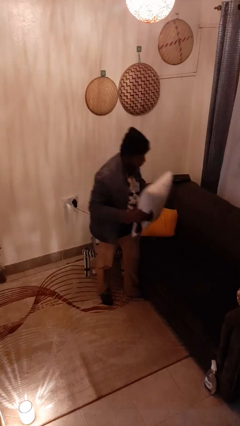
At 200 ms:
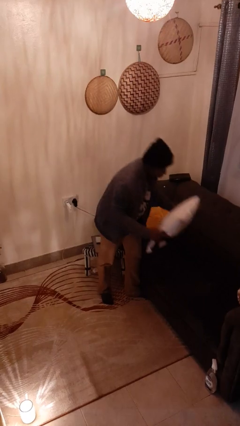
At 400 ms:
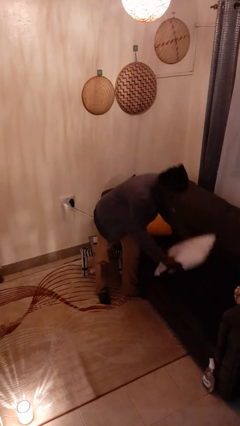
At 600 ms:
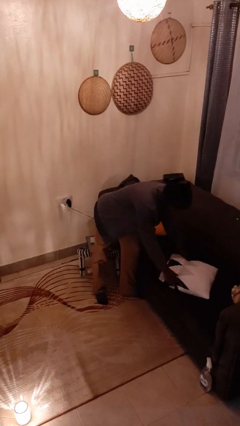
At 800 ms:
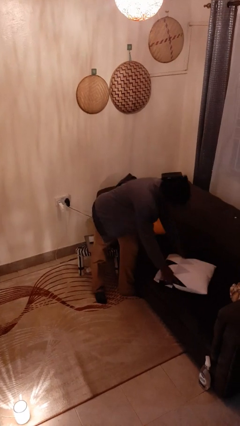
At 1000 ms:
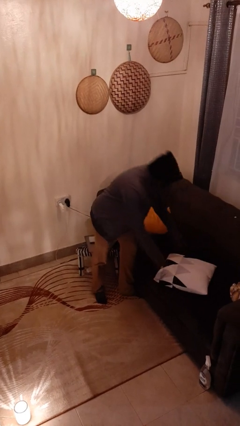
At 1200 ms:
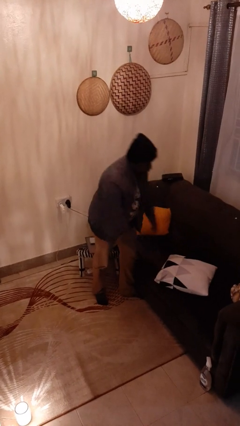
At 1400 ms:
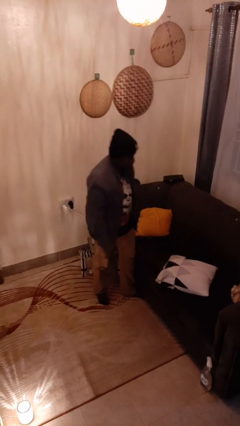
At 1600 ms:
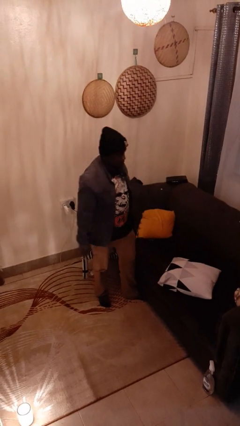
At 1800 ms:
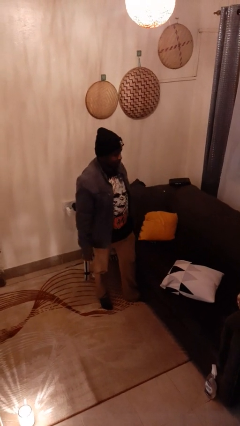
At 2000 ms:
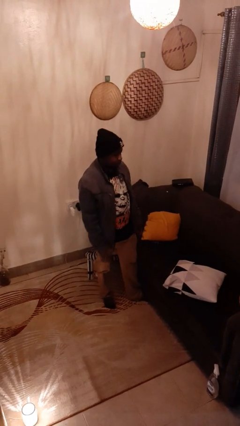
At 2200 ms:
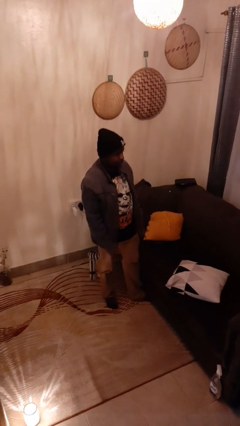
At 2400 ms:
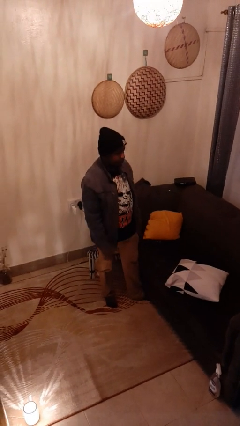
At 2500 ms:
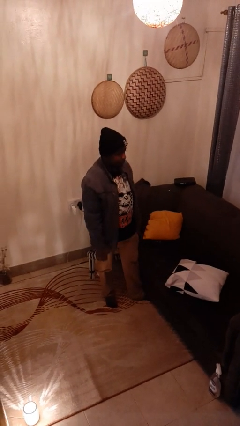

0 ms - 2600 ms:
person puts down object on couch

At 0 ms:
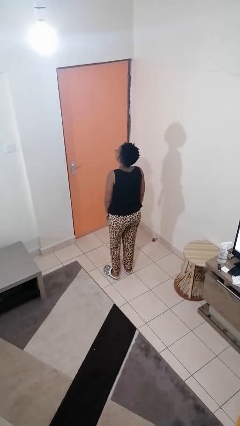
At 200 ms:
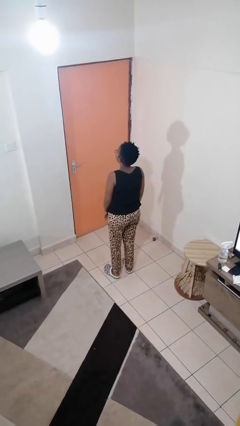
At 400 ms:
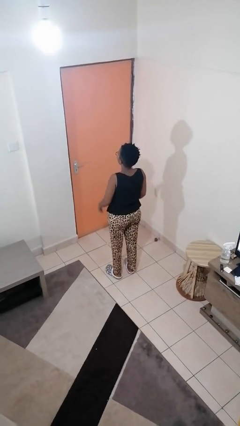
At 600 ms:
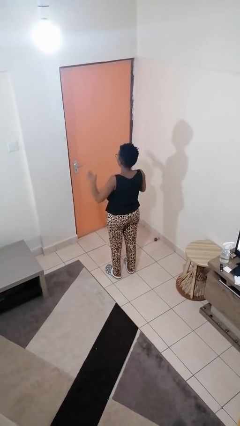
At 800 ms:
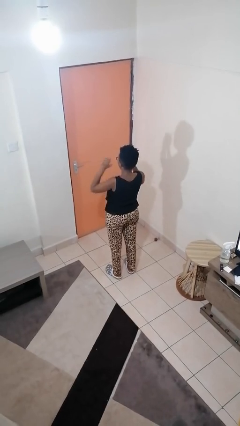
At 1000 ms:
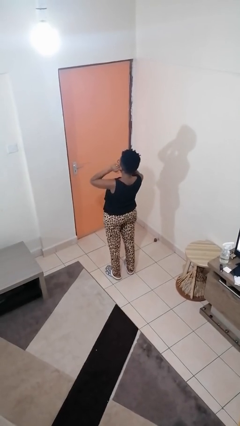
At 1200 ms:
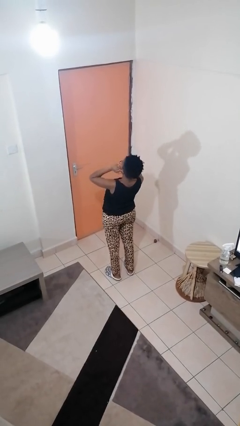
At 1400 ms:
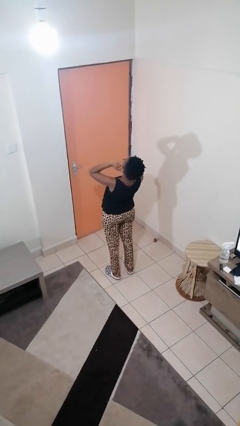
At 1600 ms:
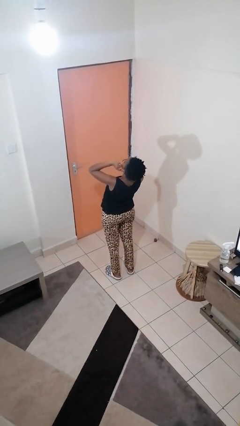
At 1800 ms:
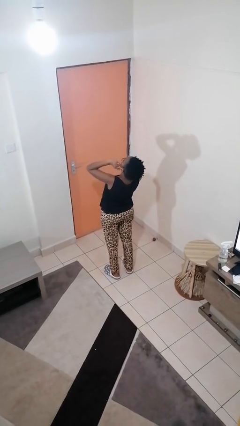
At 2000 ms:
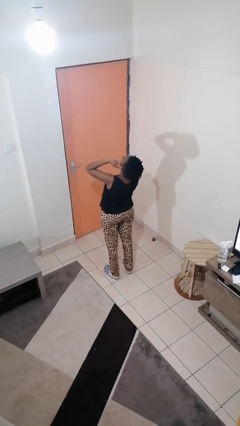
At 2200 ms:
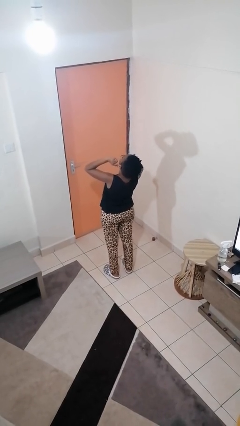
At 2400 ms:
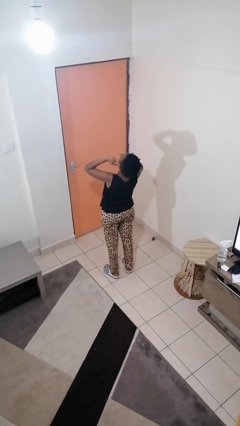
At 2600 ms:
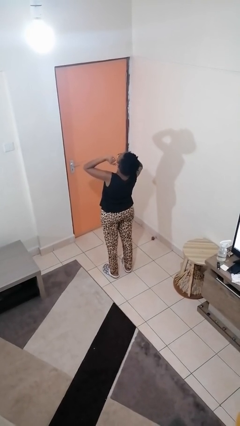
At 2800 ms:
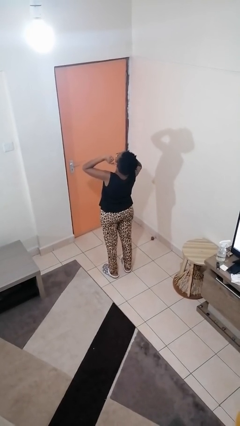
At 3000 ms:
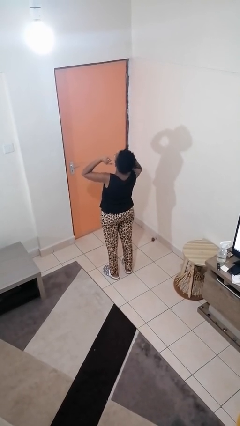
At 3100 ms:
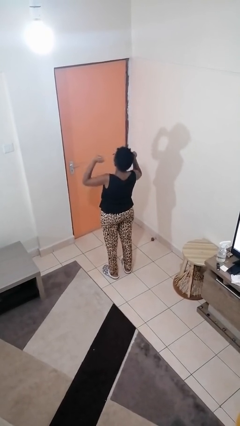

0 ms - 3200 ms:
person puts fingers in ear

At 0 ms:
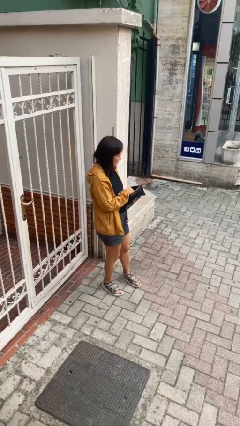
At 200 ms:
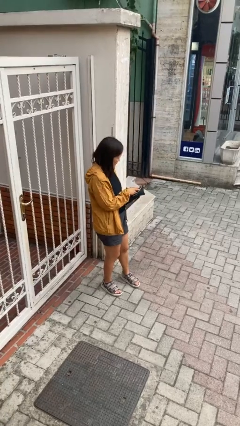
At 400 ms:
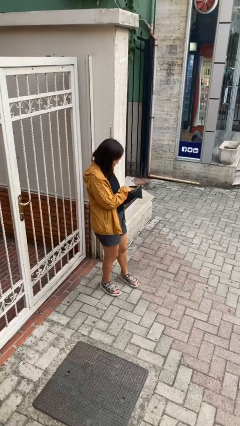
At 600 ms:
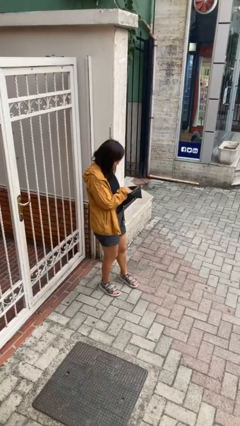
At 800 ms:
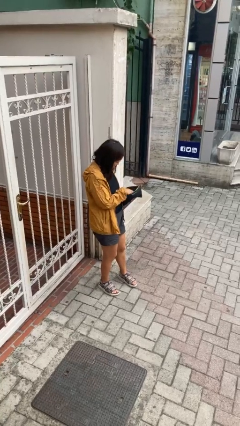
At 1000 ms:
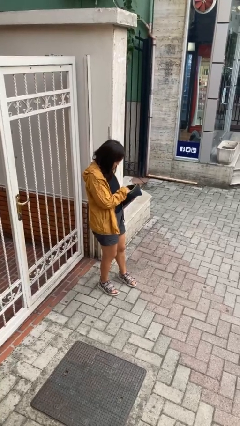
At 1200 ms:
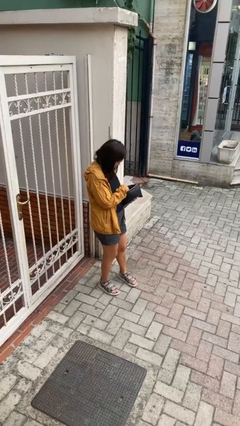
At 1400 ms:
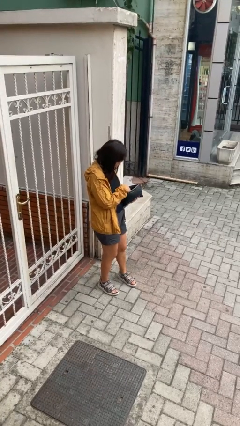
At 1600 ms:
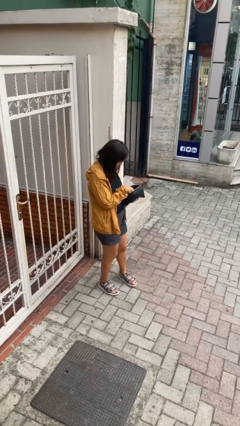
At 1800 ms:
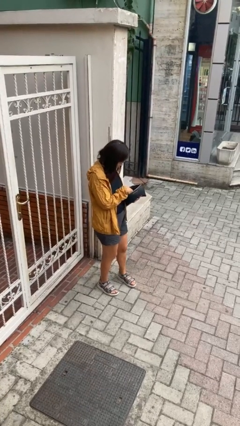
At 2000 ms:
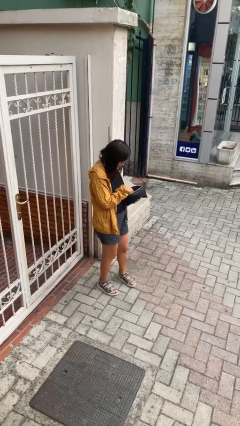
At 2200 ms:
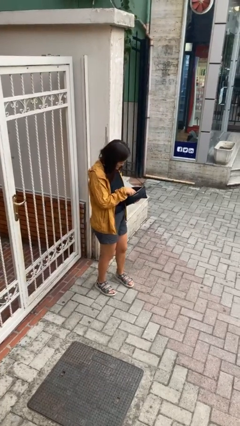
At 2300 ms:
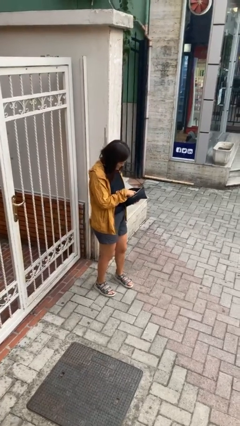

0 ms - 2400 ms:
person searches in purse

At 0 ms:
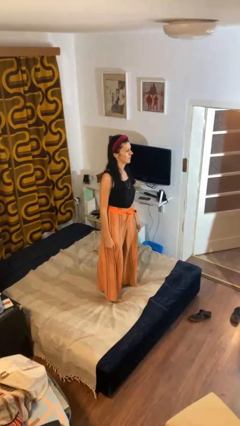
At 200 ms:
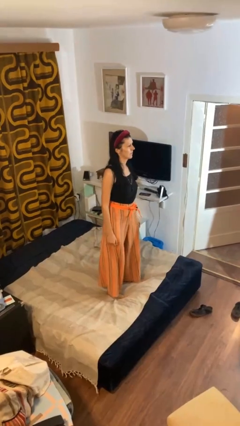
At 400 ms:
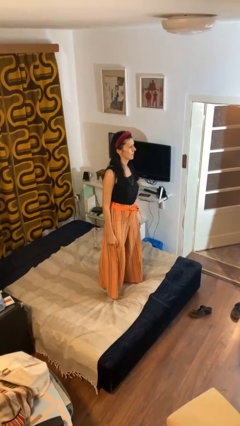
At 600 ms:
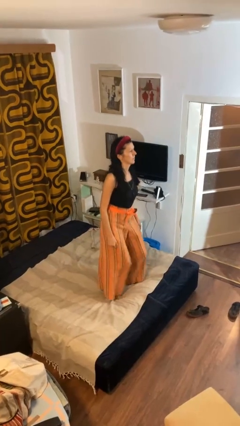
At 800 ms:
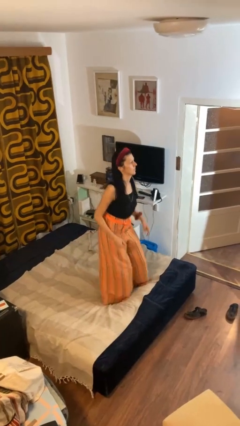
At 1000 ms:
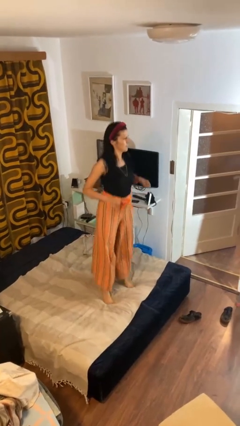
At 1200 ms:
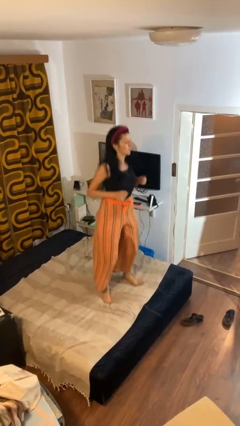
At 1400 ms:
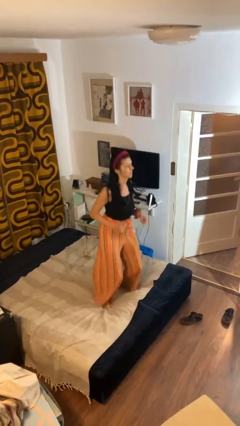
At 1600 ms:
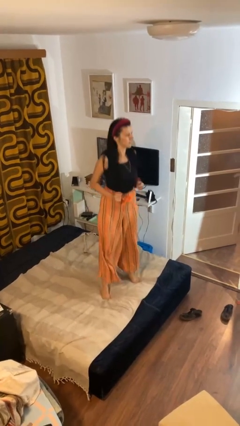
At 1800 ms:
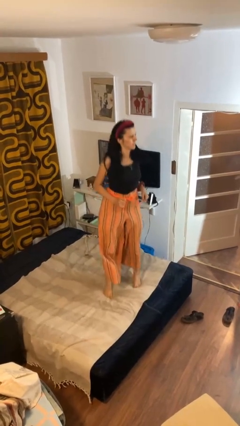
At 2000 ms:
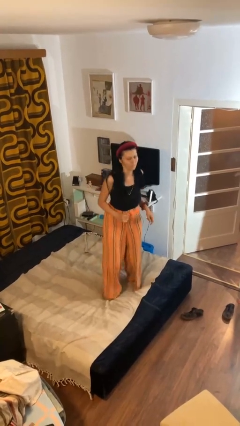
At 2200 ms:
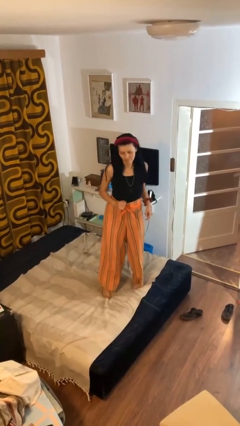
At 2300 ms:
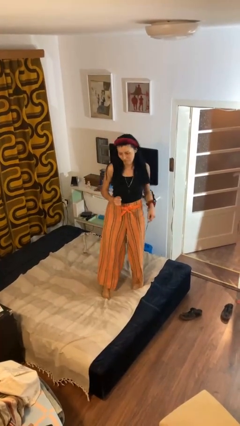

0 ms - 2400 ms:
person jumps on bed

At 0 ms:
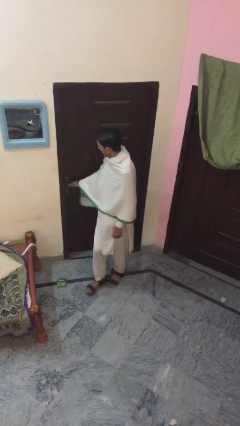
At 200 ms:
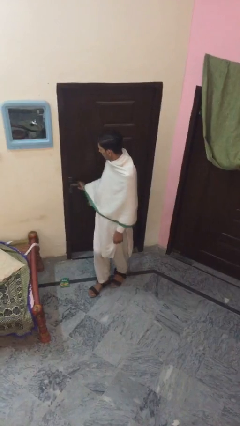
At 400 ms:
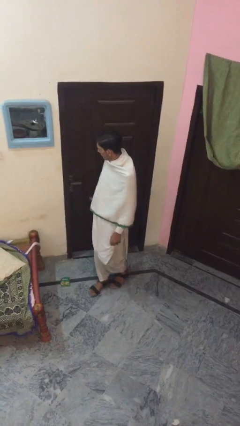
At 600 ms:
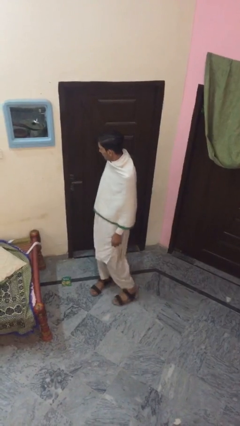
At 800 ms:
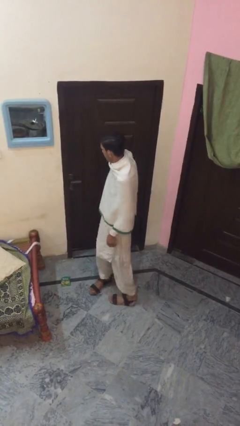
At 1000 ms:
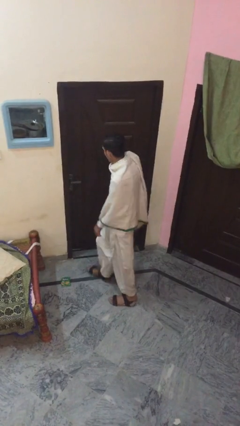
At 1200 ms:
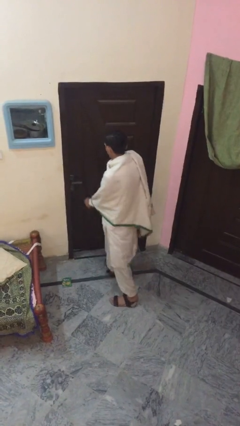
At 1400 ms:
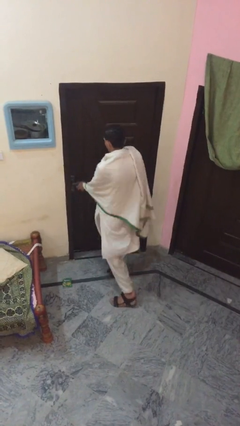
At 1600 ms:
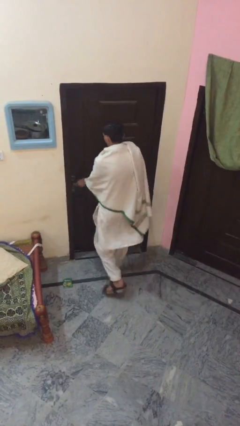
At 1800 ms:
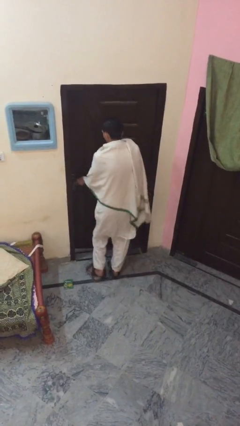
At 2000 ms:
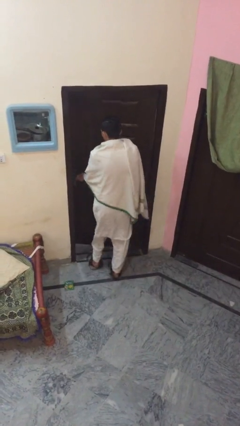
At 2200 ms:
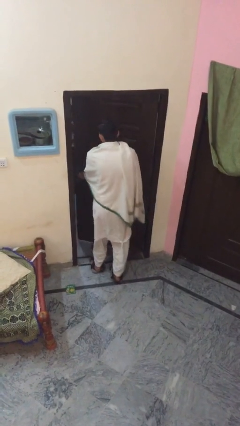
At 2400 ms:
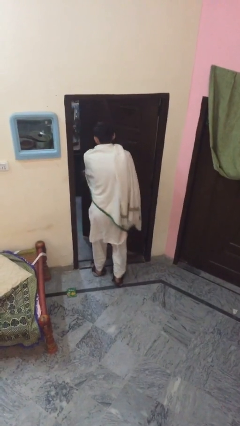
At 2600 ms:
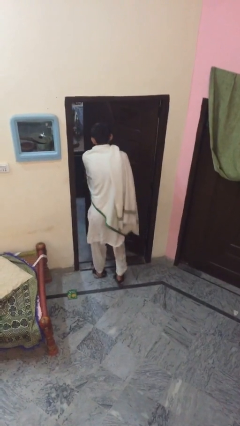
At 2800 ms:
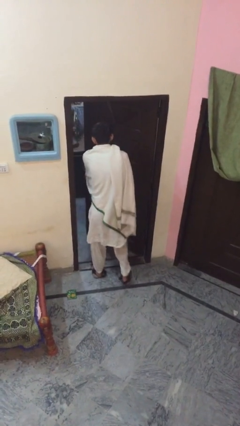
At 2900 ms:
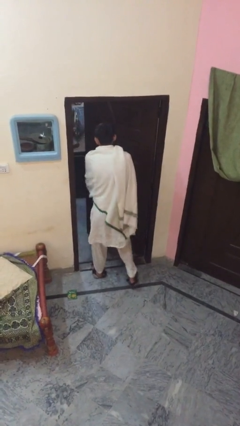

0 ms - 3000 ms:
person opens facility door

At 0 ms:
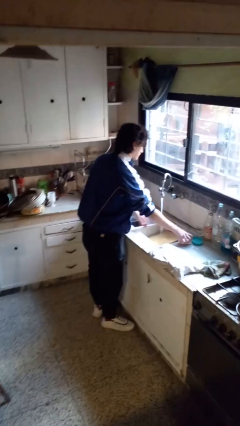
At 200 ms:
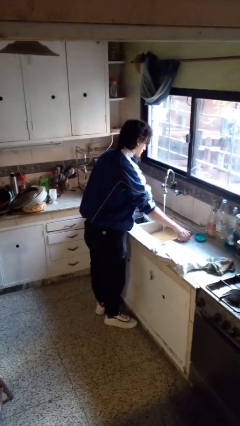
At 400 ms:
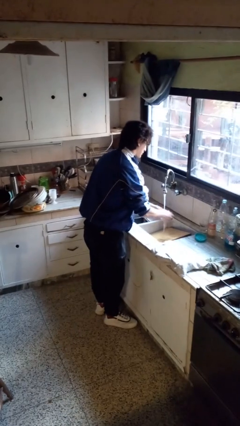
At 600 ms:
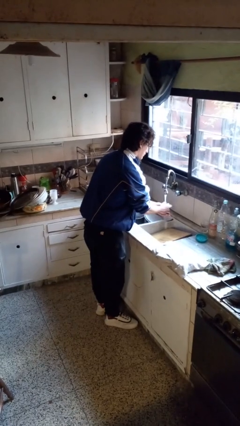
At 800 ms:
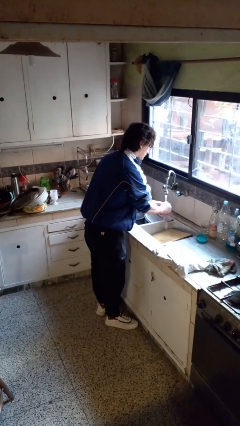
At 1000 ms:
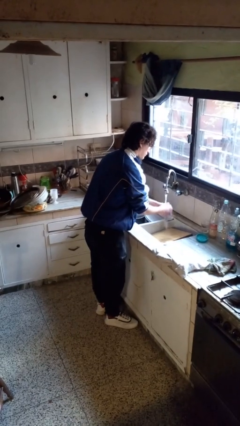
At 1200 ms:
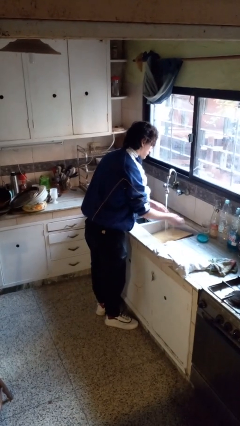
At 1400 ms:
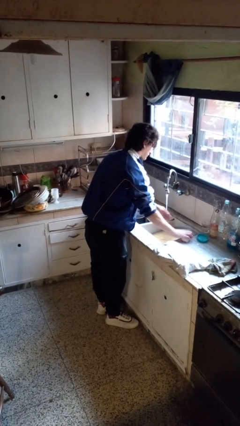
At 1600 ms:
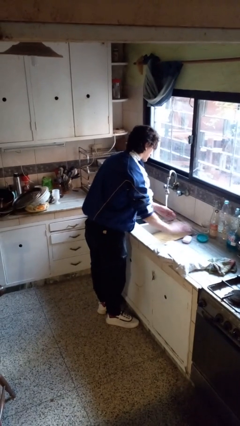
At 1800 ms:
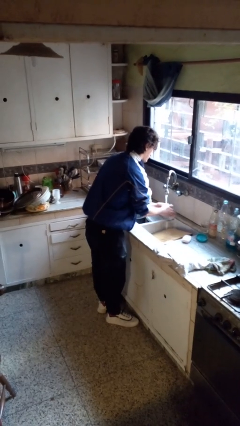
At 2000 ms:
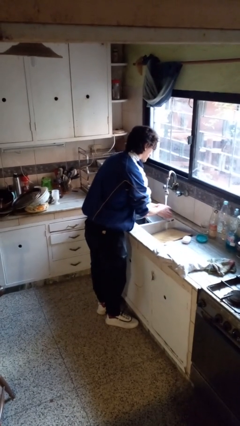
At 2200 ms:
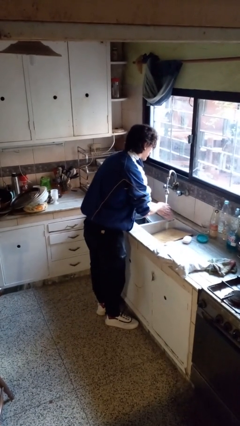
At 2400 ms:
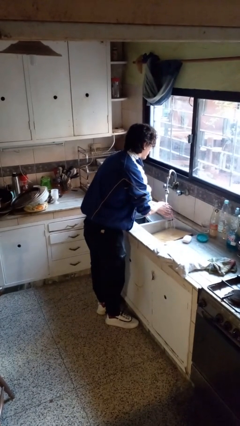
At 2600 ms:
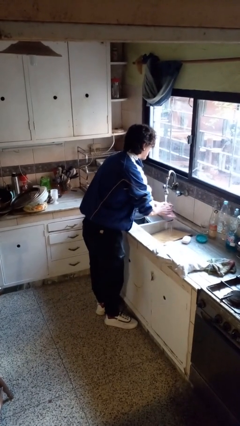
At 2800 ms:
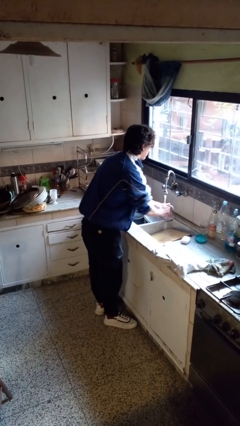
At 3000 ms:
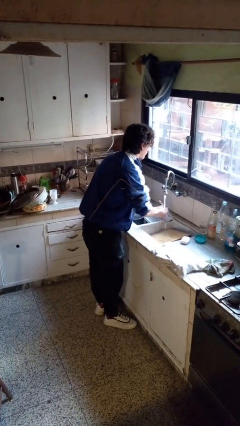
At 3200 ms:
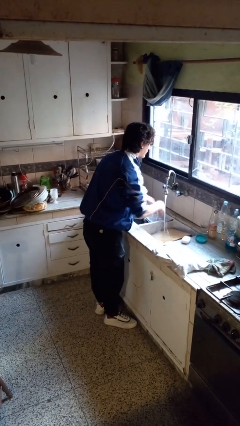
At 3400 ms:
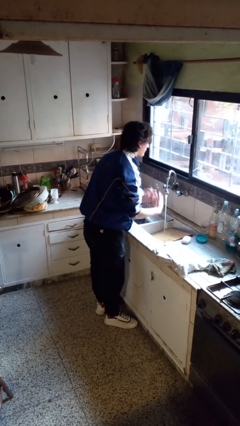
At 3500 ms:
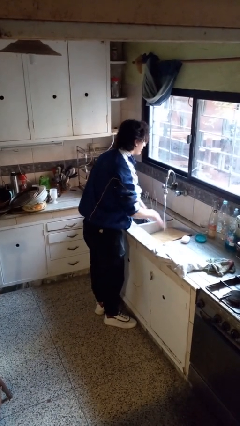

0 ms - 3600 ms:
person washes hands

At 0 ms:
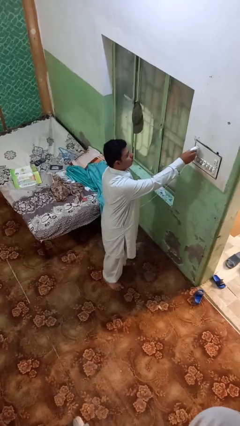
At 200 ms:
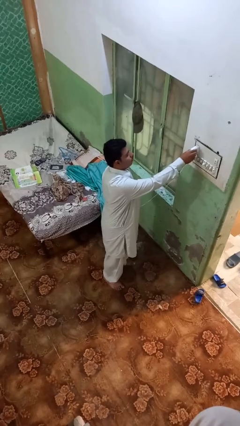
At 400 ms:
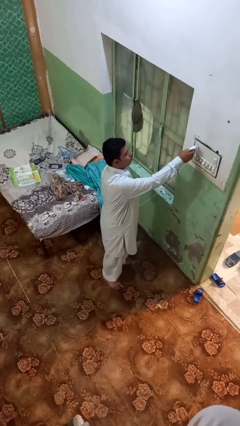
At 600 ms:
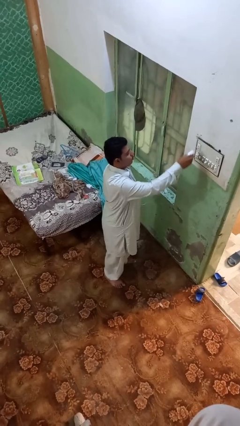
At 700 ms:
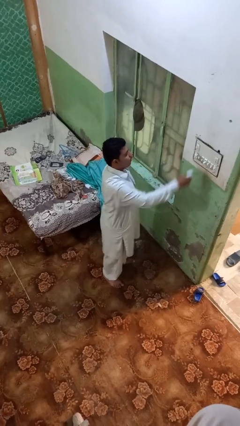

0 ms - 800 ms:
person unplugs from electrical socket
